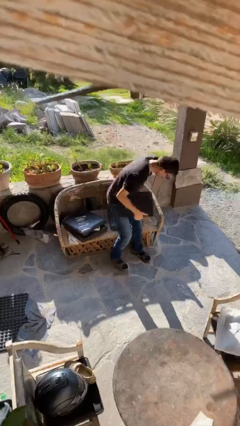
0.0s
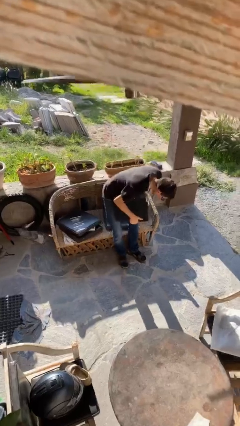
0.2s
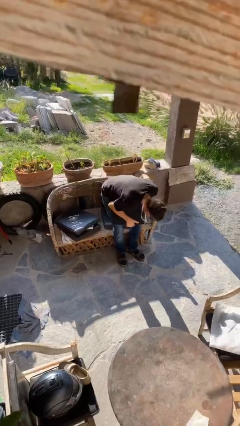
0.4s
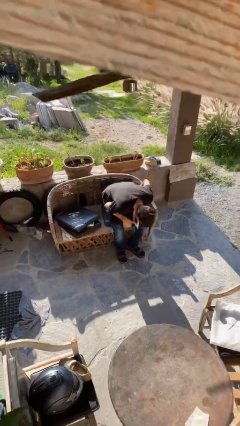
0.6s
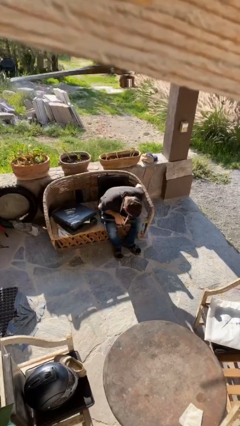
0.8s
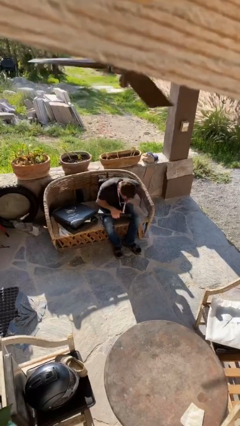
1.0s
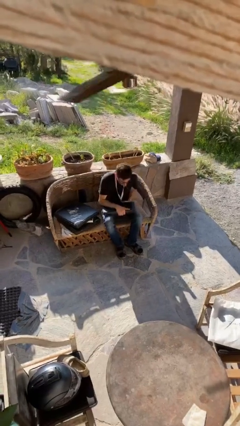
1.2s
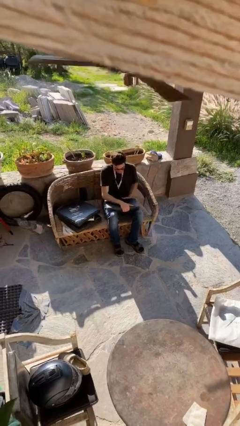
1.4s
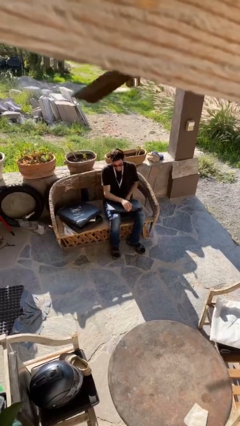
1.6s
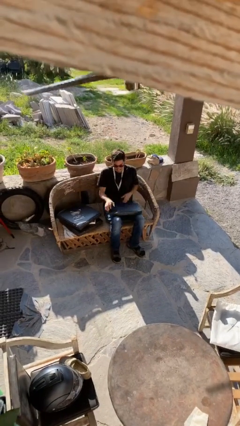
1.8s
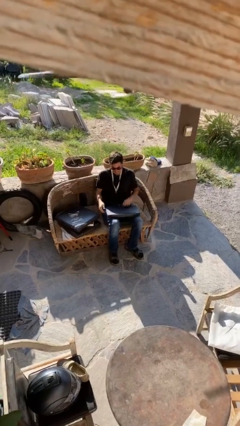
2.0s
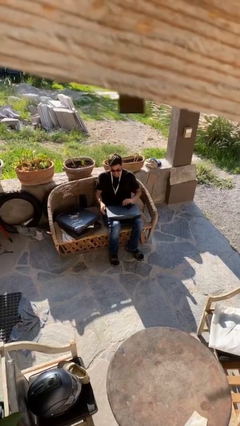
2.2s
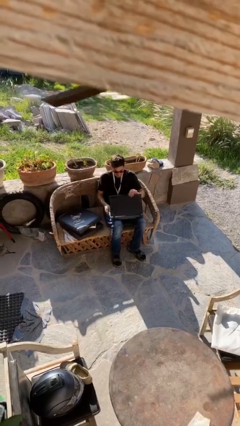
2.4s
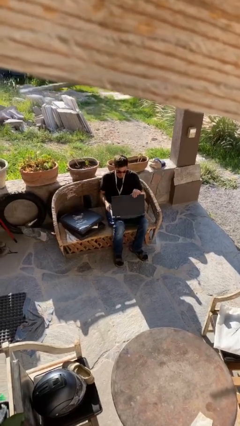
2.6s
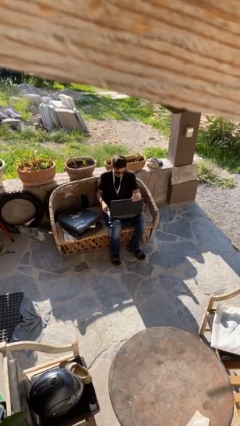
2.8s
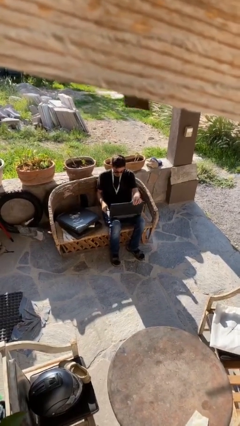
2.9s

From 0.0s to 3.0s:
person sits down

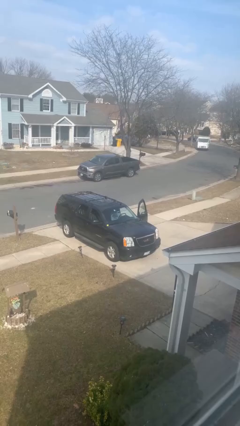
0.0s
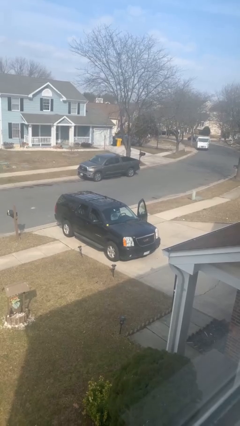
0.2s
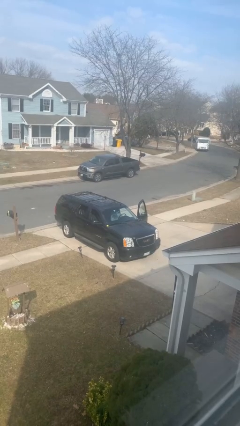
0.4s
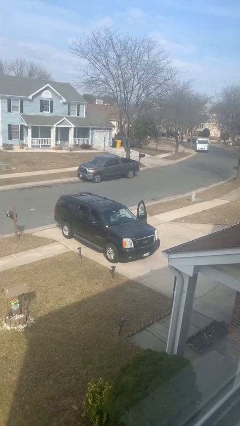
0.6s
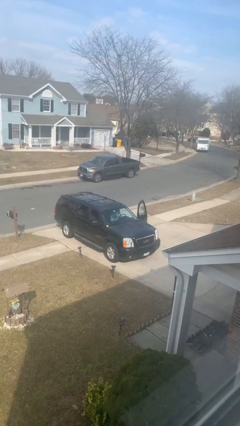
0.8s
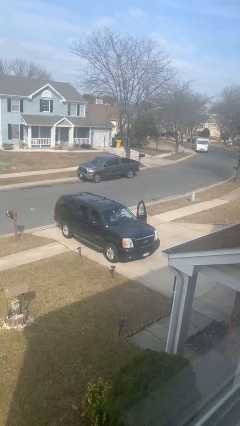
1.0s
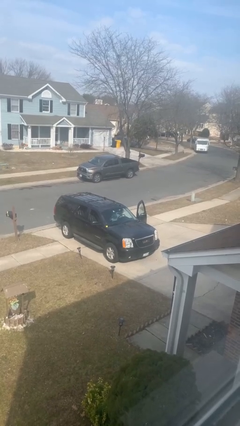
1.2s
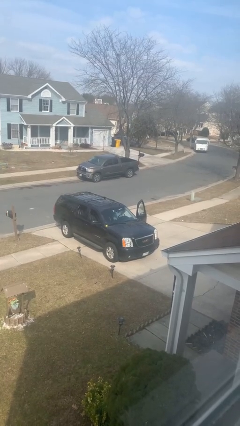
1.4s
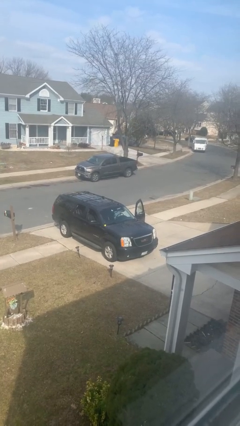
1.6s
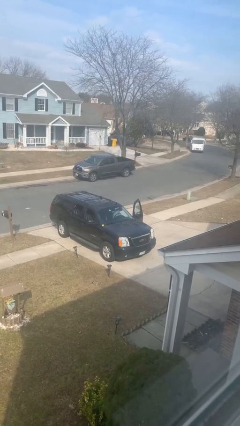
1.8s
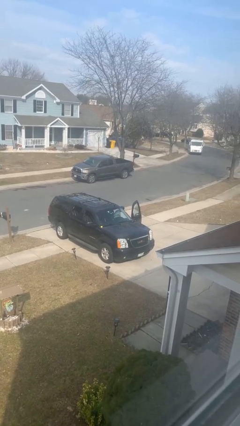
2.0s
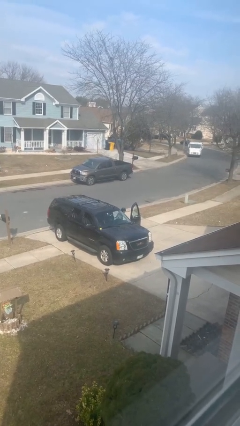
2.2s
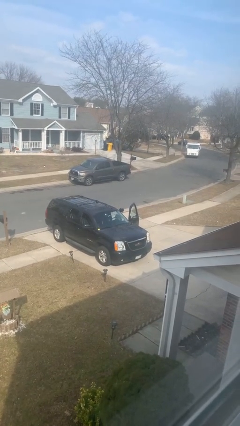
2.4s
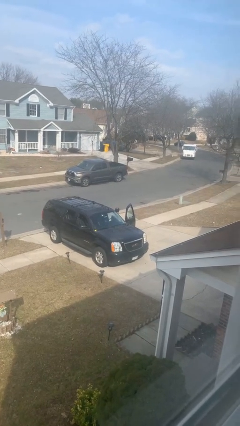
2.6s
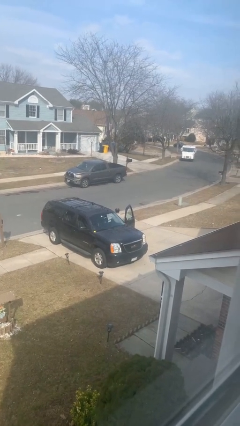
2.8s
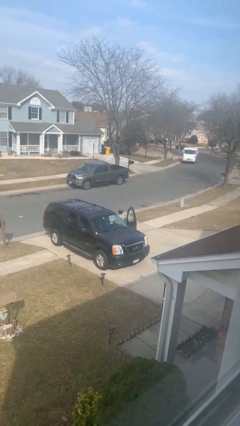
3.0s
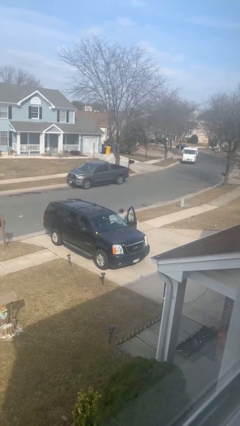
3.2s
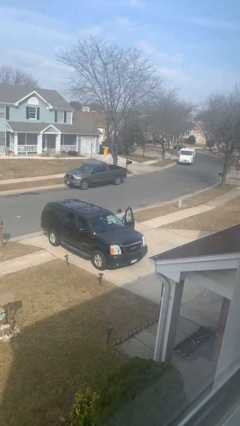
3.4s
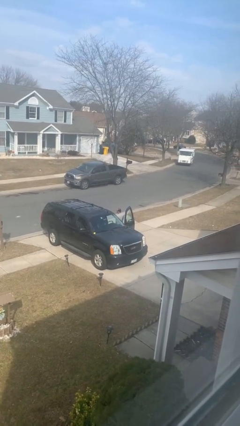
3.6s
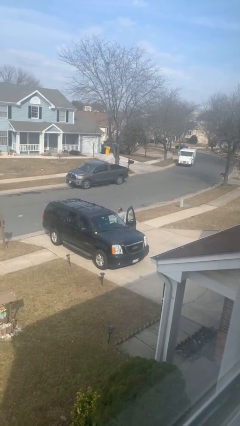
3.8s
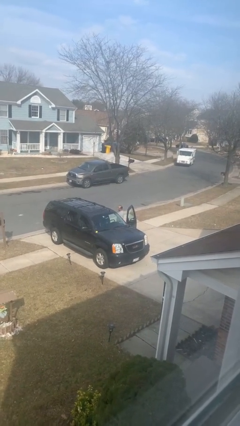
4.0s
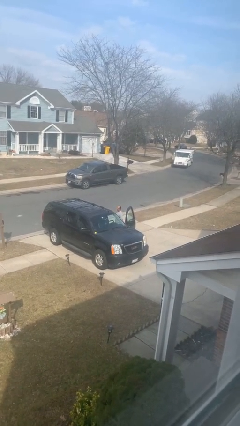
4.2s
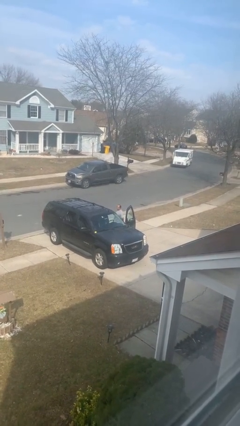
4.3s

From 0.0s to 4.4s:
person exits car

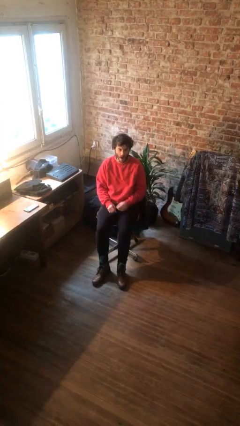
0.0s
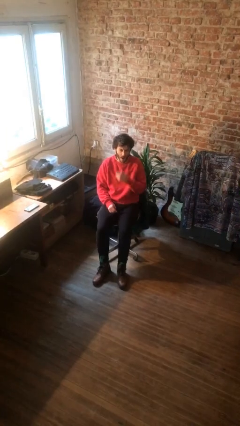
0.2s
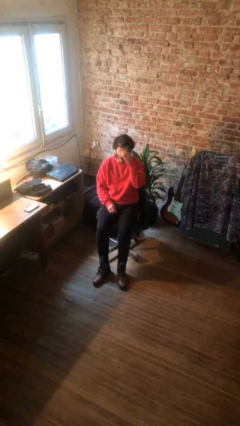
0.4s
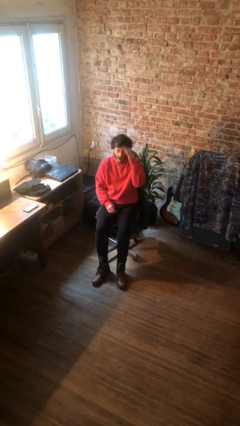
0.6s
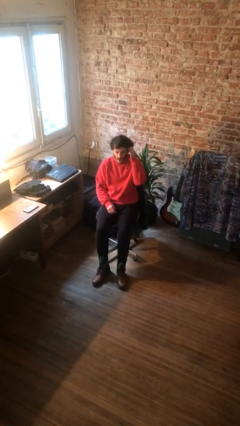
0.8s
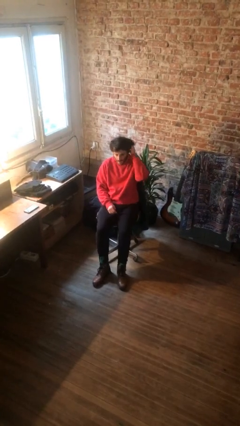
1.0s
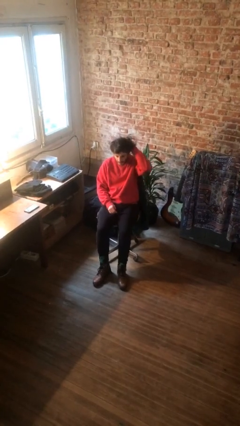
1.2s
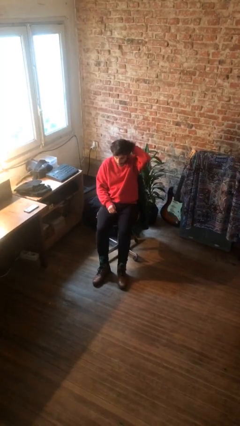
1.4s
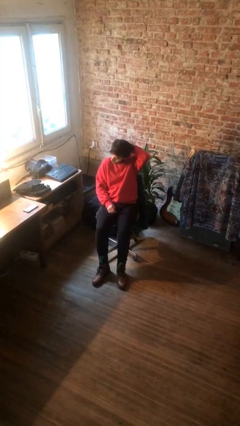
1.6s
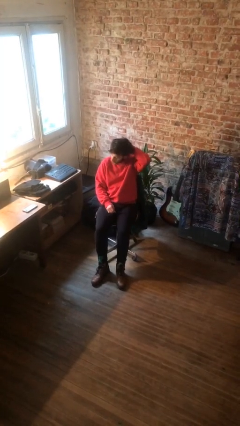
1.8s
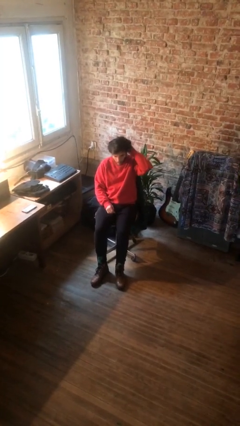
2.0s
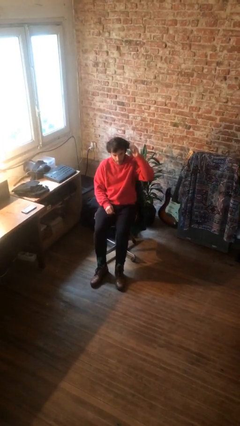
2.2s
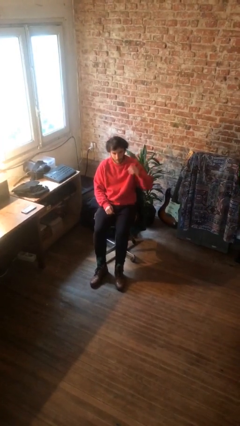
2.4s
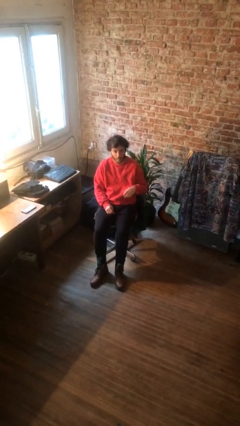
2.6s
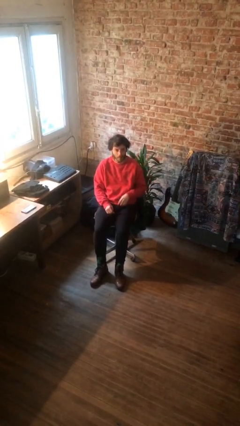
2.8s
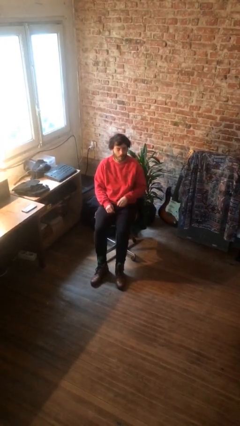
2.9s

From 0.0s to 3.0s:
person scratches face

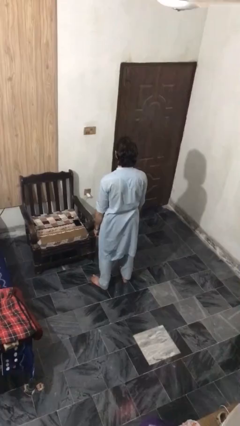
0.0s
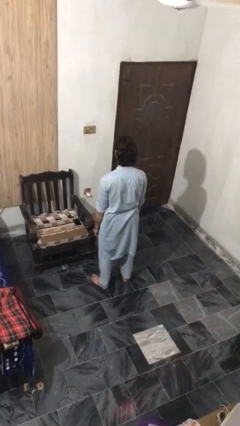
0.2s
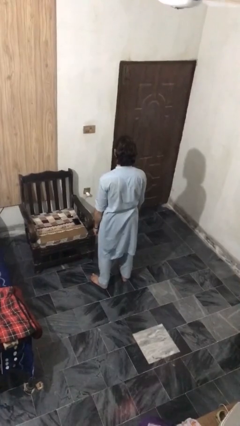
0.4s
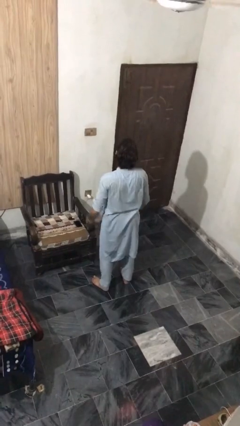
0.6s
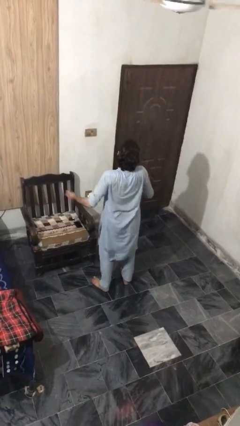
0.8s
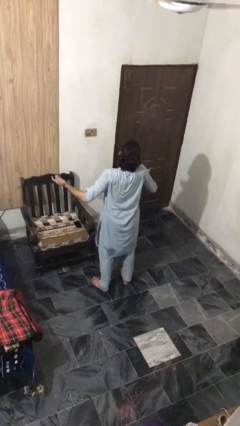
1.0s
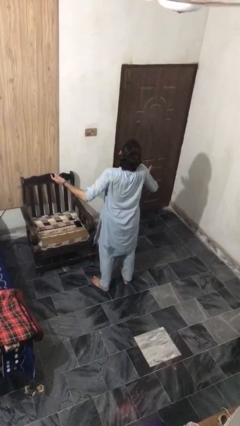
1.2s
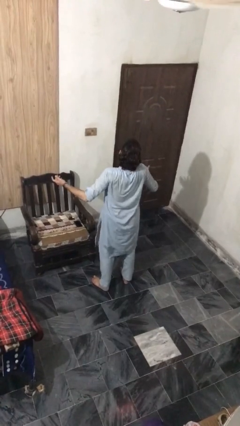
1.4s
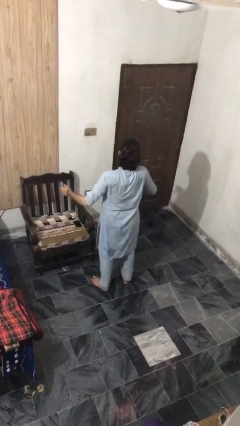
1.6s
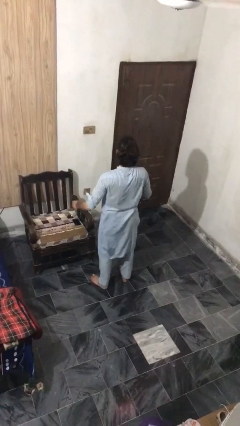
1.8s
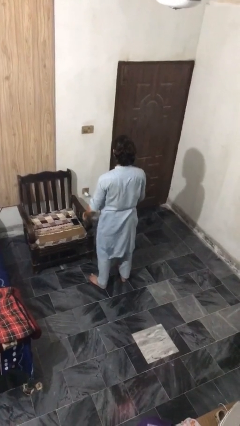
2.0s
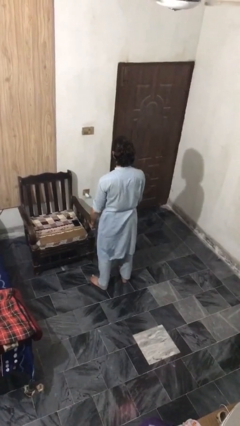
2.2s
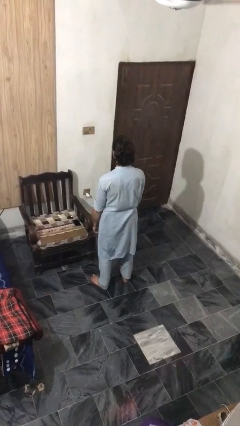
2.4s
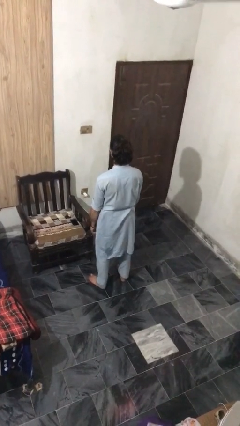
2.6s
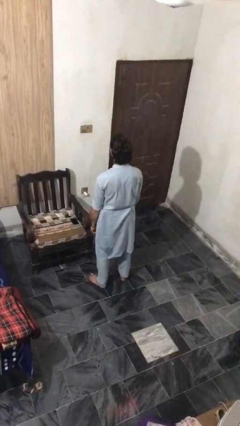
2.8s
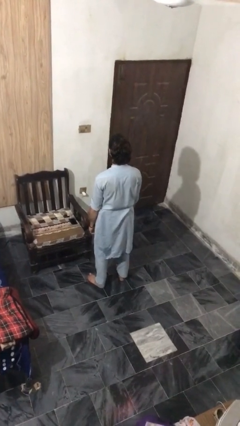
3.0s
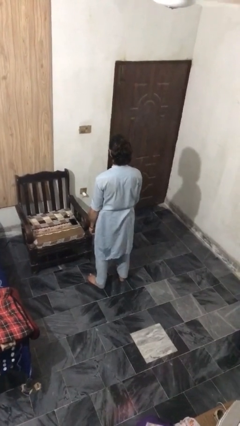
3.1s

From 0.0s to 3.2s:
person shrugs

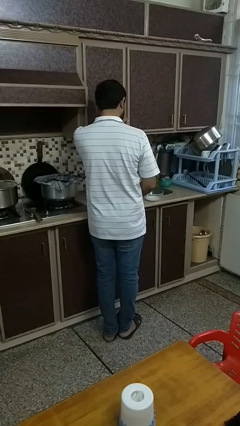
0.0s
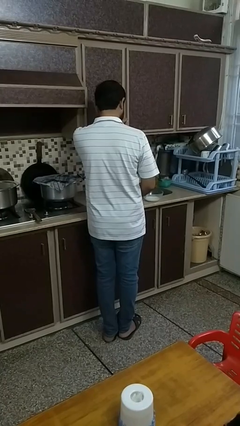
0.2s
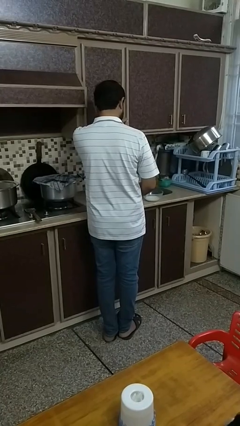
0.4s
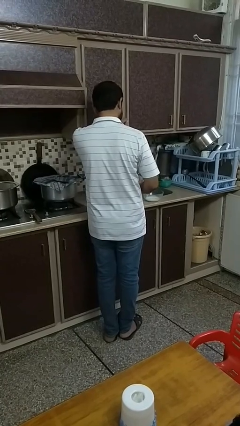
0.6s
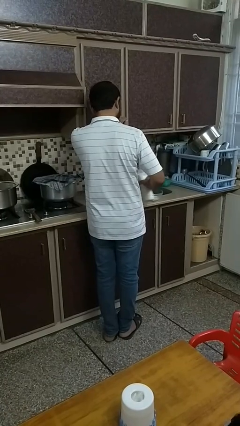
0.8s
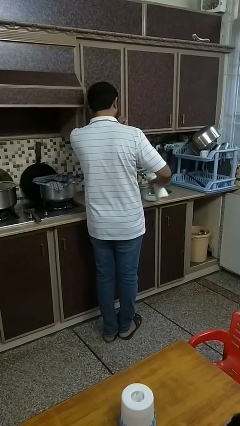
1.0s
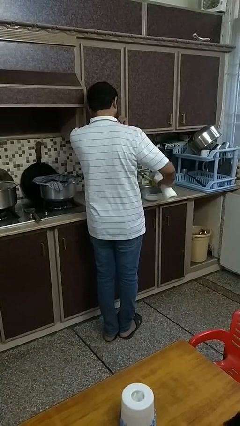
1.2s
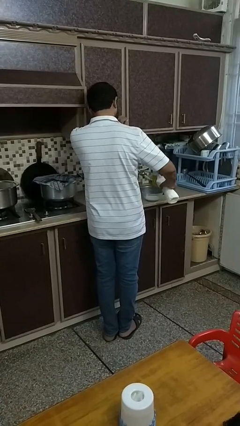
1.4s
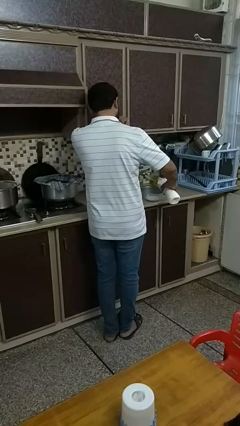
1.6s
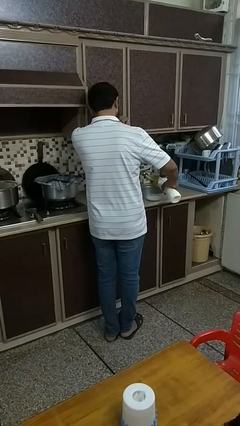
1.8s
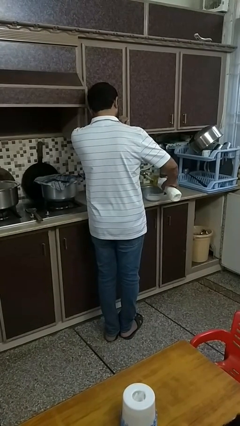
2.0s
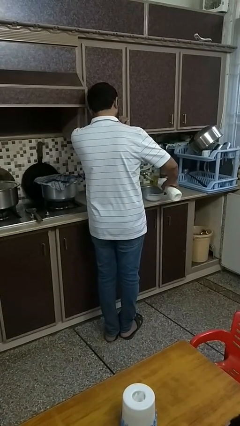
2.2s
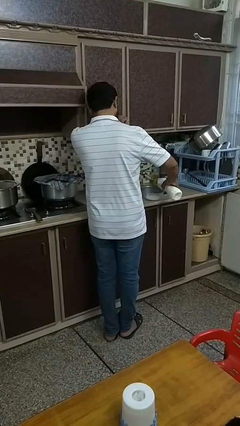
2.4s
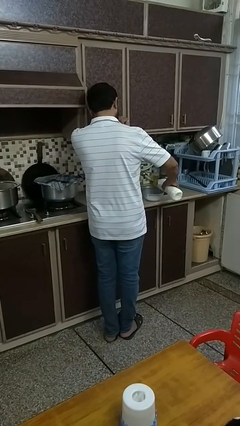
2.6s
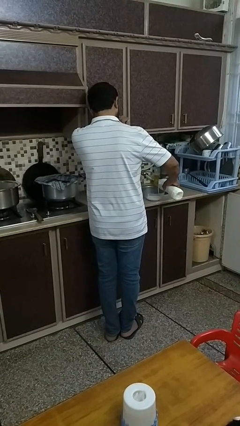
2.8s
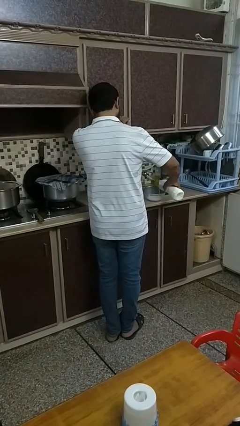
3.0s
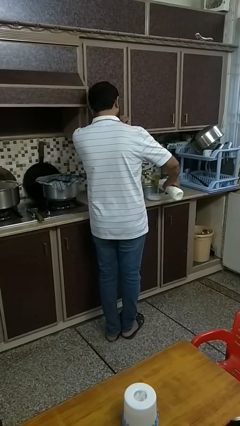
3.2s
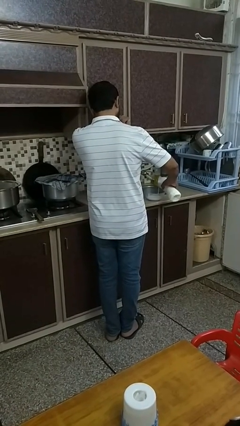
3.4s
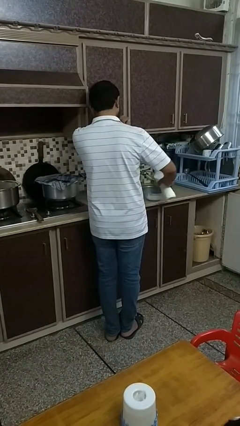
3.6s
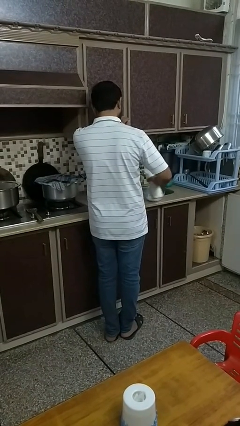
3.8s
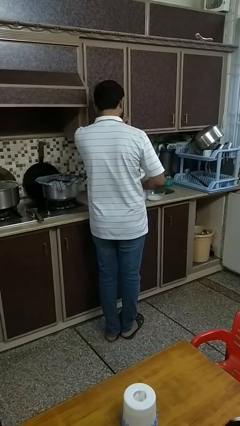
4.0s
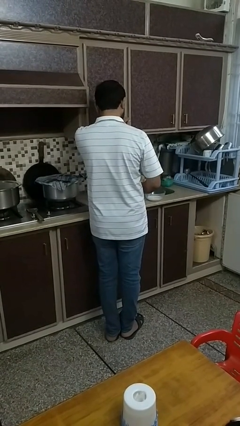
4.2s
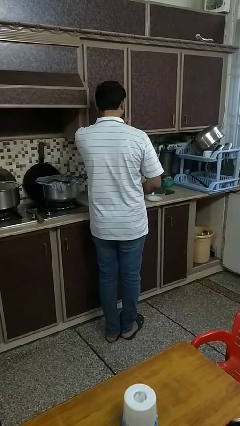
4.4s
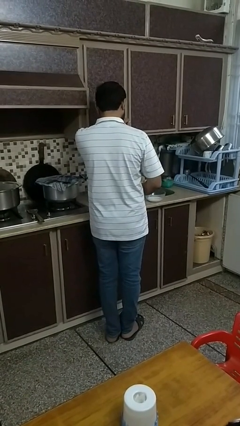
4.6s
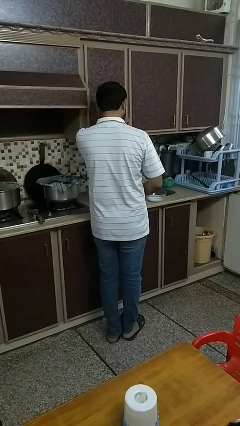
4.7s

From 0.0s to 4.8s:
person pours into bowl
